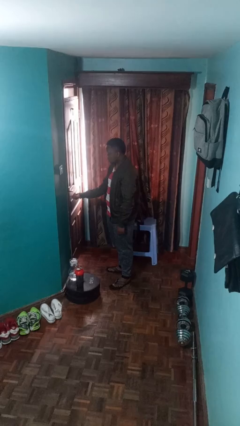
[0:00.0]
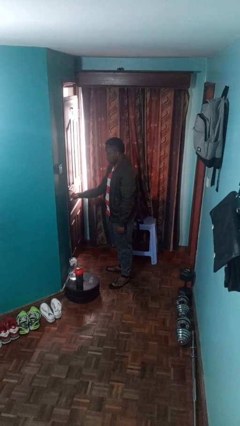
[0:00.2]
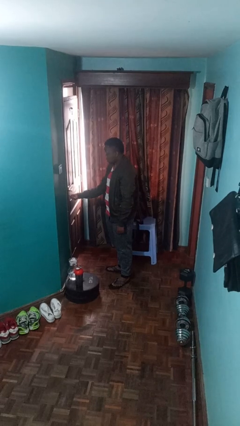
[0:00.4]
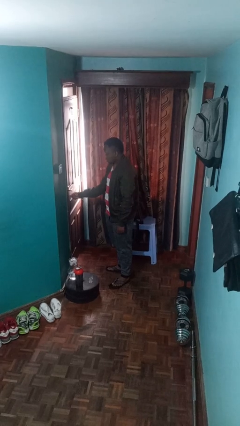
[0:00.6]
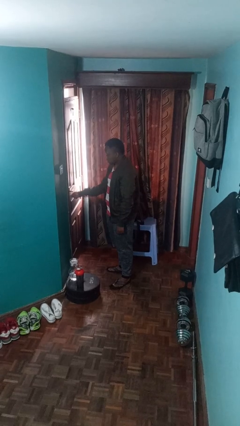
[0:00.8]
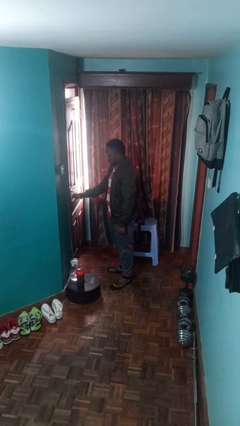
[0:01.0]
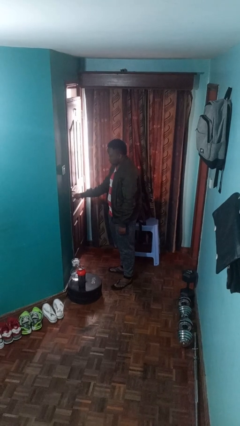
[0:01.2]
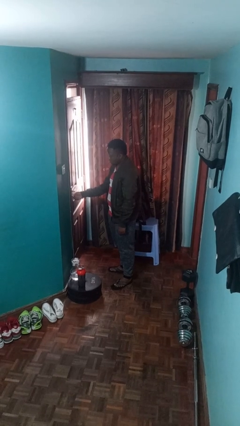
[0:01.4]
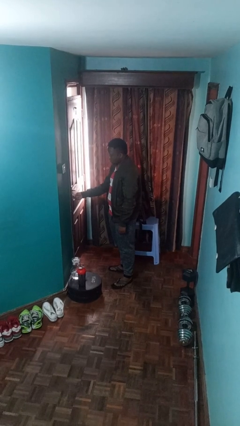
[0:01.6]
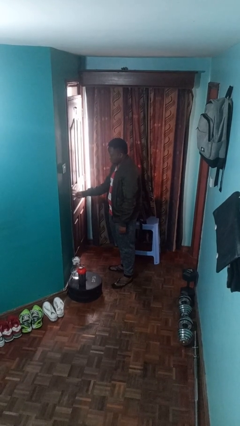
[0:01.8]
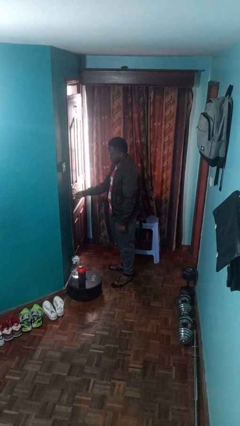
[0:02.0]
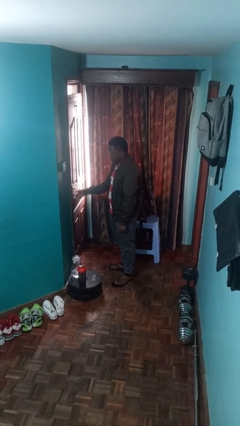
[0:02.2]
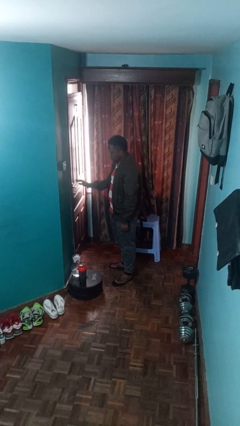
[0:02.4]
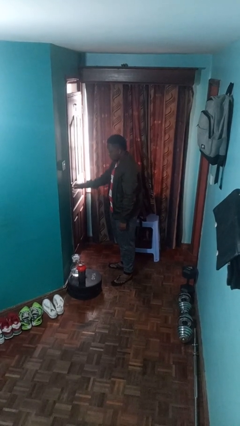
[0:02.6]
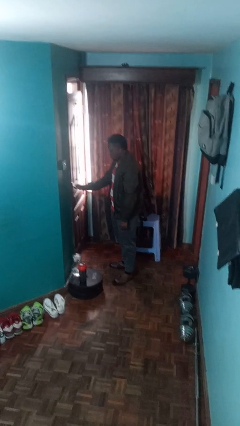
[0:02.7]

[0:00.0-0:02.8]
person unlocks door with keys

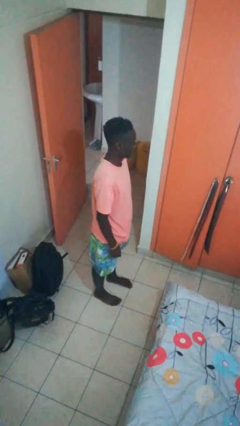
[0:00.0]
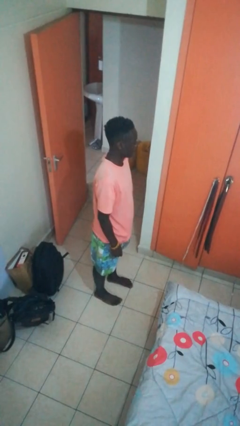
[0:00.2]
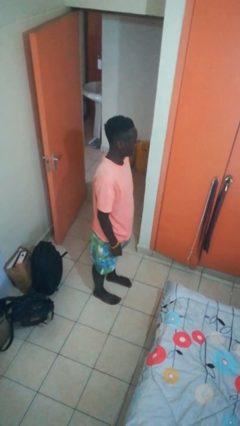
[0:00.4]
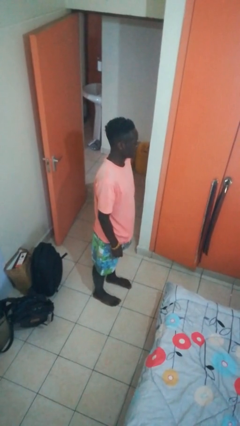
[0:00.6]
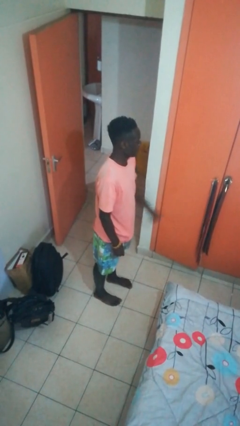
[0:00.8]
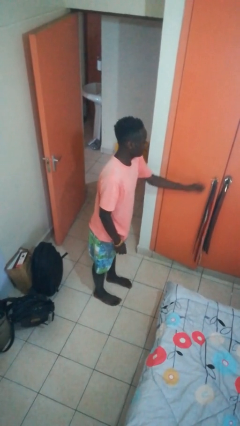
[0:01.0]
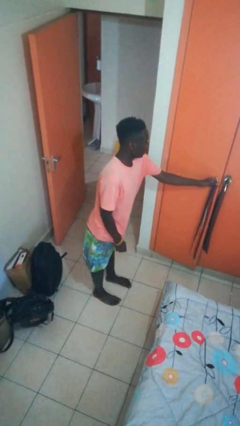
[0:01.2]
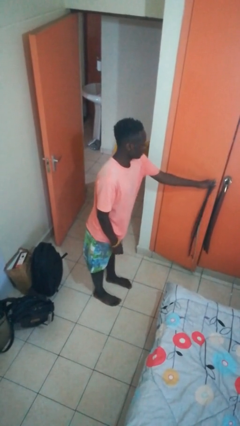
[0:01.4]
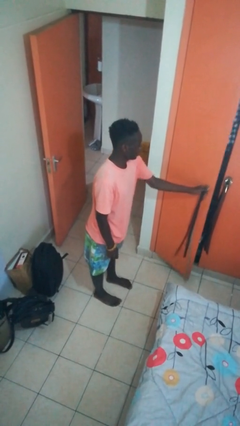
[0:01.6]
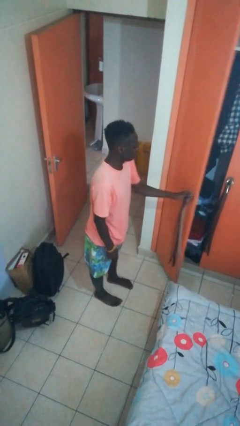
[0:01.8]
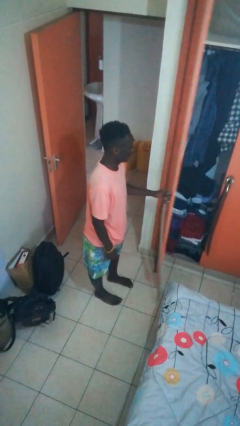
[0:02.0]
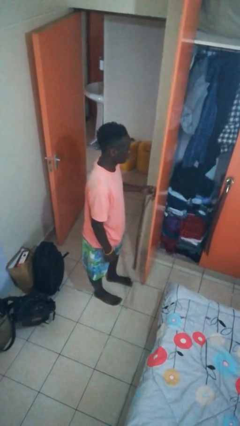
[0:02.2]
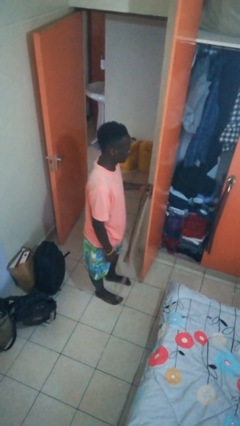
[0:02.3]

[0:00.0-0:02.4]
person opens closet door

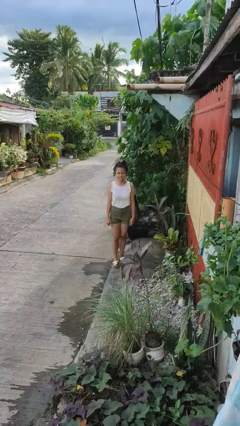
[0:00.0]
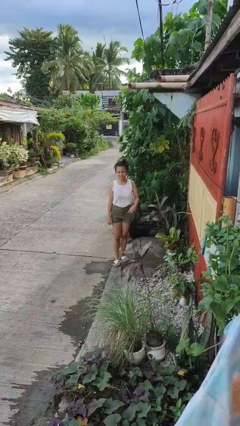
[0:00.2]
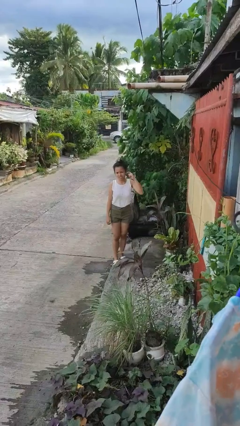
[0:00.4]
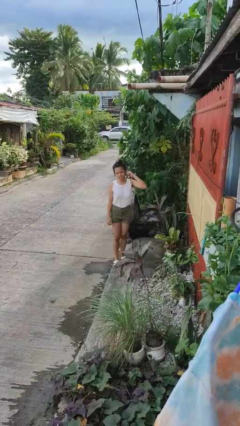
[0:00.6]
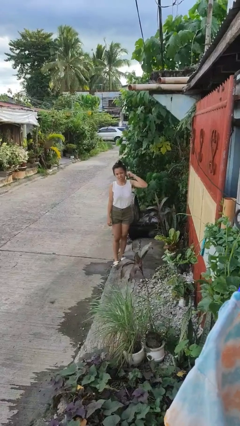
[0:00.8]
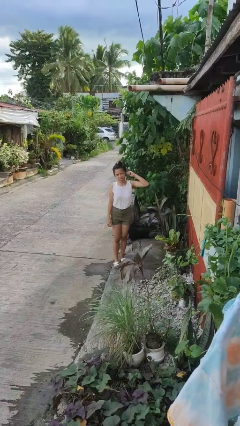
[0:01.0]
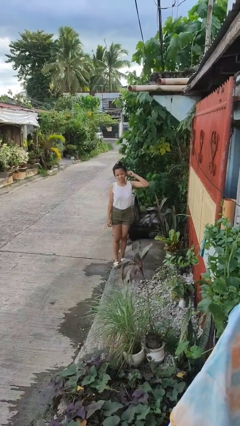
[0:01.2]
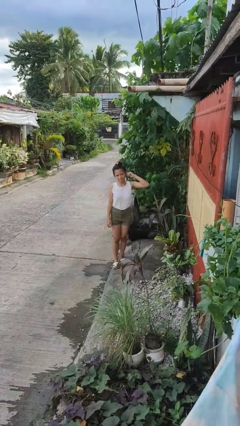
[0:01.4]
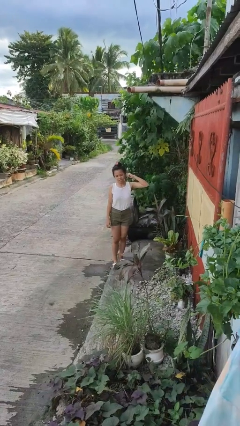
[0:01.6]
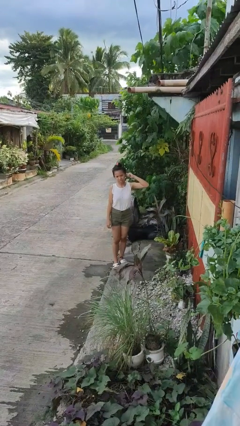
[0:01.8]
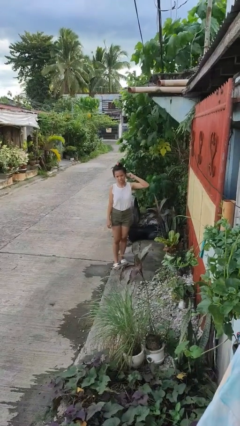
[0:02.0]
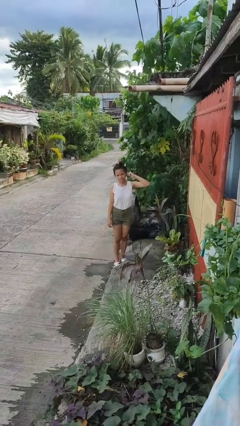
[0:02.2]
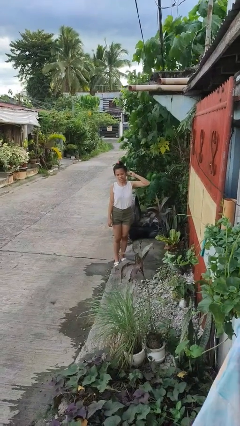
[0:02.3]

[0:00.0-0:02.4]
person touches earlobe

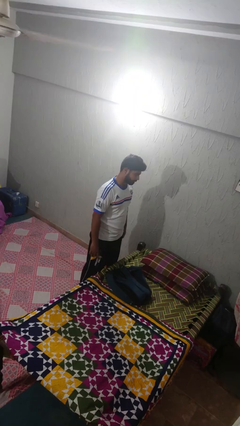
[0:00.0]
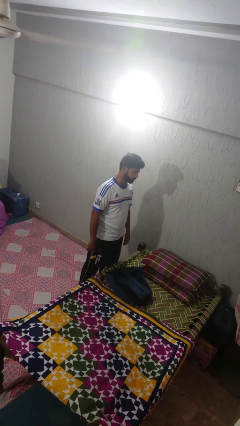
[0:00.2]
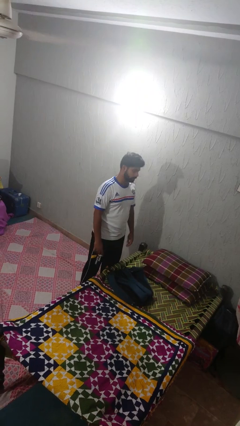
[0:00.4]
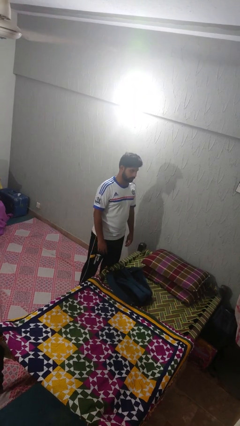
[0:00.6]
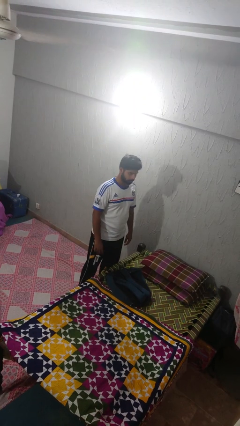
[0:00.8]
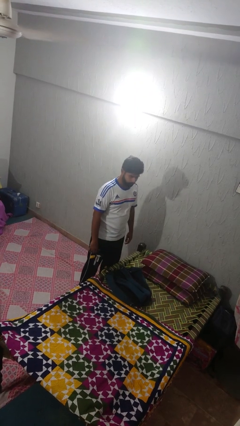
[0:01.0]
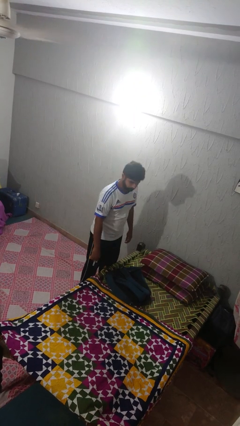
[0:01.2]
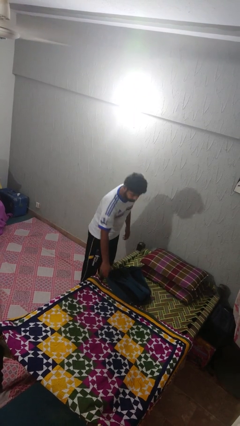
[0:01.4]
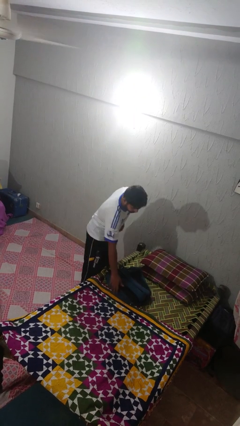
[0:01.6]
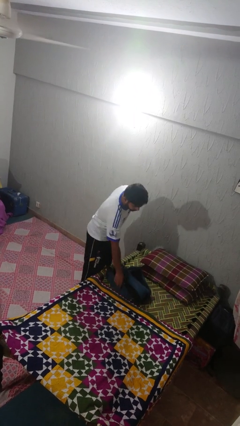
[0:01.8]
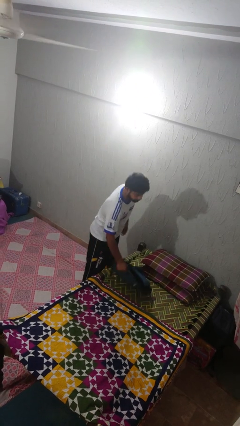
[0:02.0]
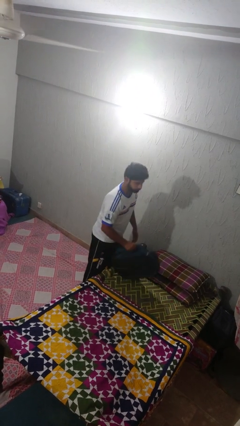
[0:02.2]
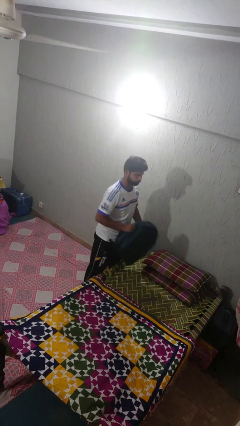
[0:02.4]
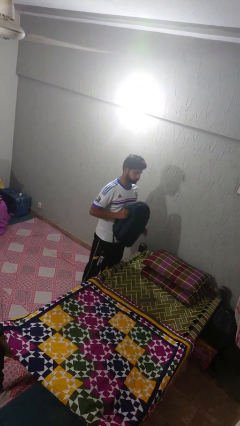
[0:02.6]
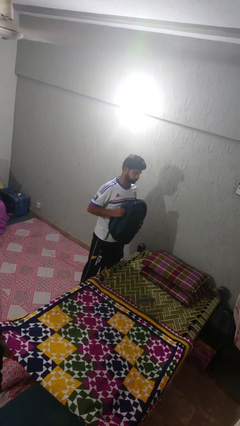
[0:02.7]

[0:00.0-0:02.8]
person picks up object from bed

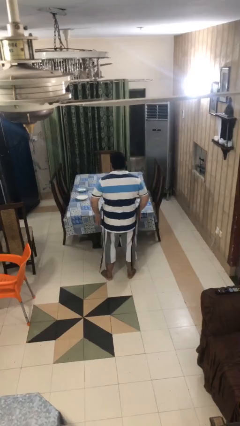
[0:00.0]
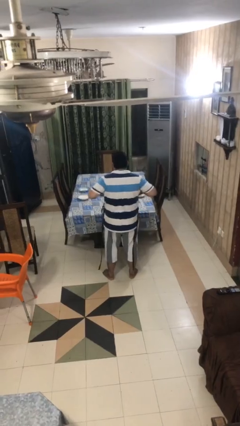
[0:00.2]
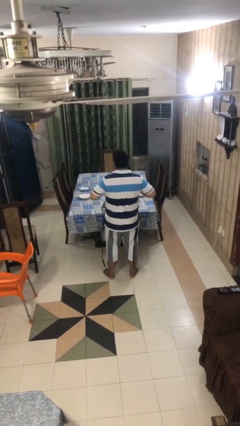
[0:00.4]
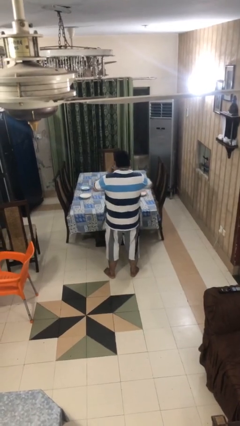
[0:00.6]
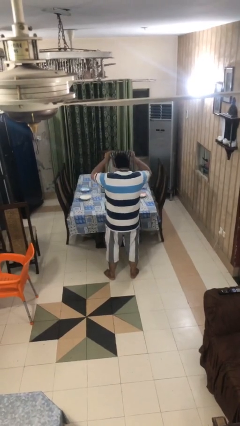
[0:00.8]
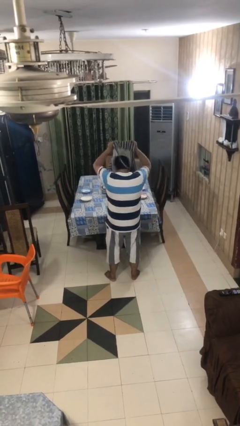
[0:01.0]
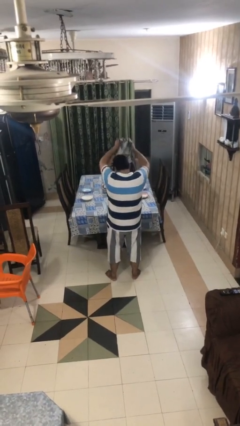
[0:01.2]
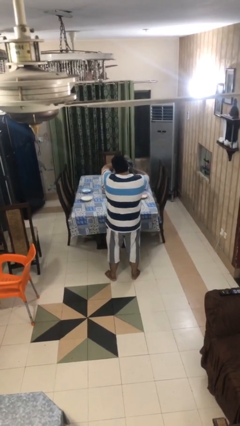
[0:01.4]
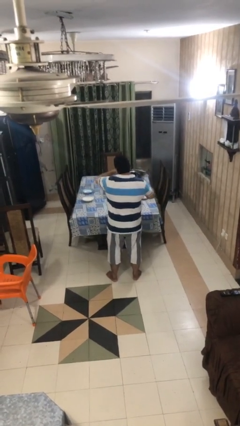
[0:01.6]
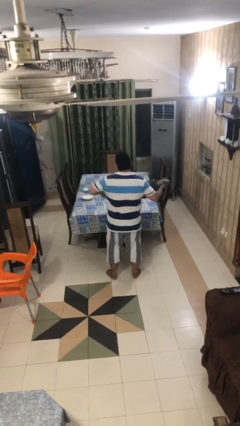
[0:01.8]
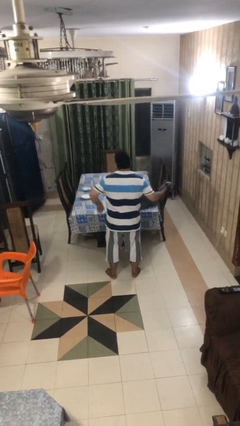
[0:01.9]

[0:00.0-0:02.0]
person takes off apron

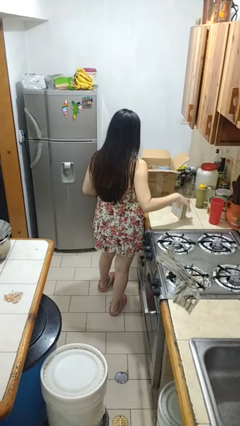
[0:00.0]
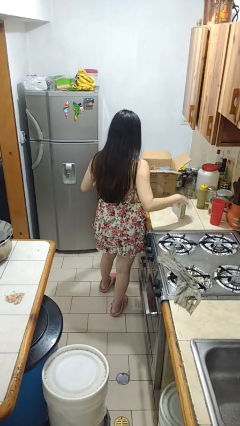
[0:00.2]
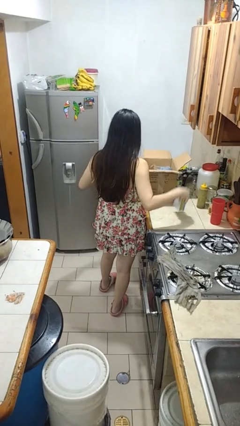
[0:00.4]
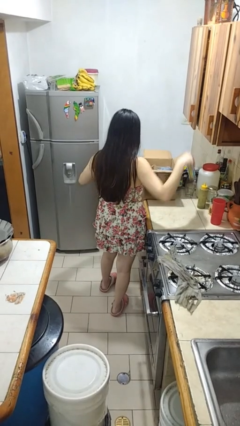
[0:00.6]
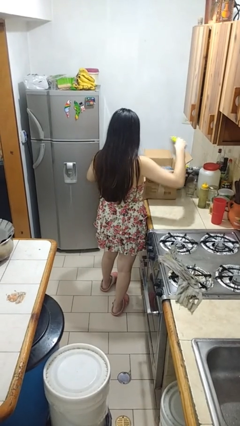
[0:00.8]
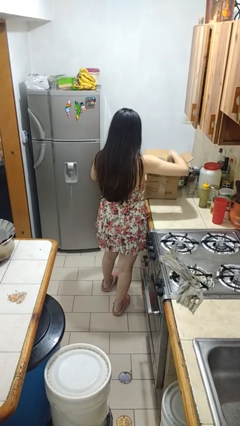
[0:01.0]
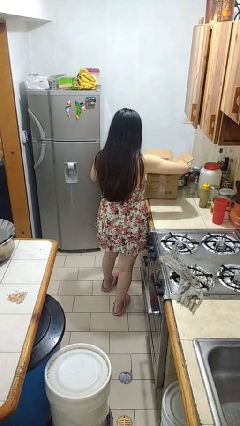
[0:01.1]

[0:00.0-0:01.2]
person puts object into box

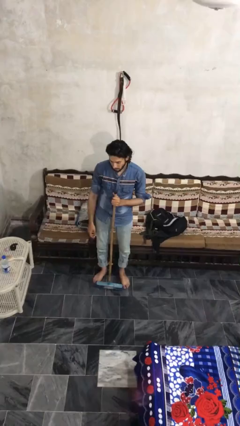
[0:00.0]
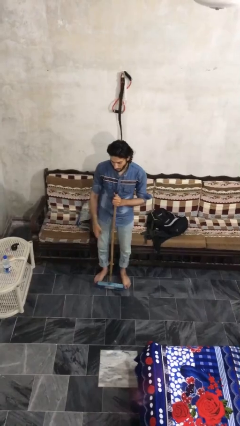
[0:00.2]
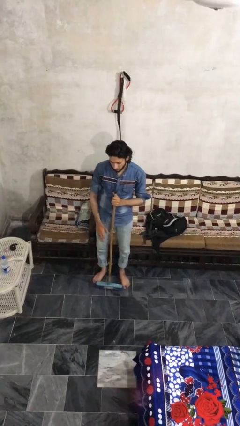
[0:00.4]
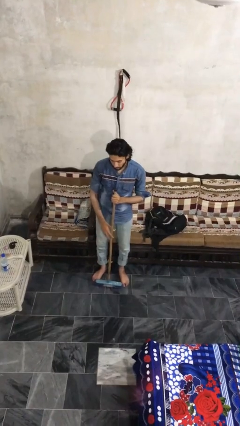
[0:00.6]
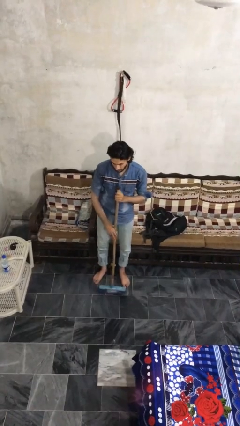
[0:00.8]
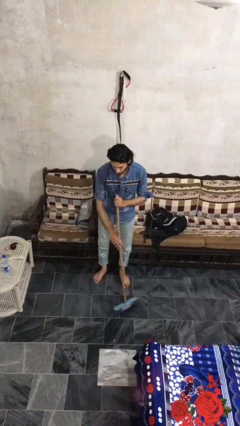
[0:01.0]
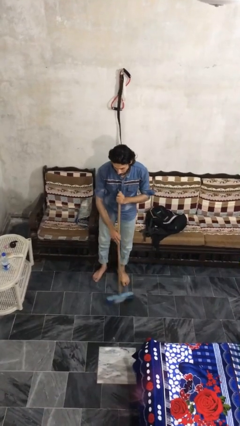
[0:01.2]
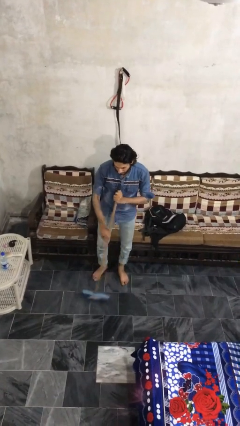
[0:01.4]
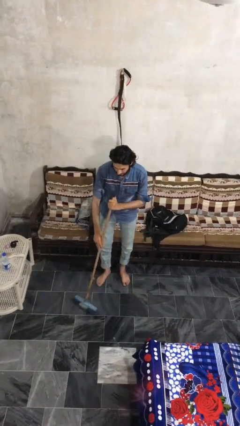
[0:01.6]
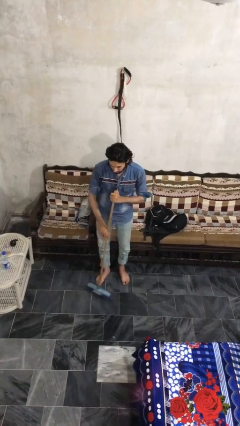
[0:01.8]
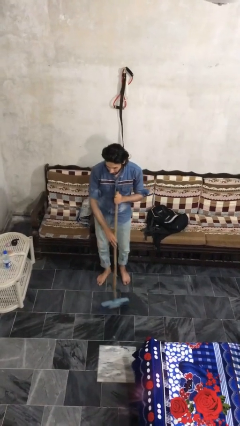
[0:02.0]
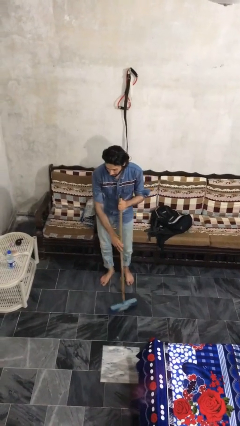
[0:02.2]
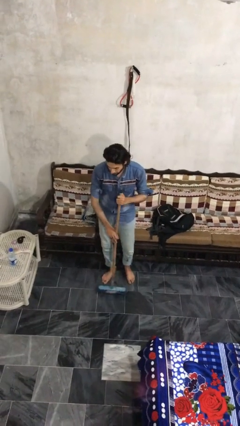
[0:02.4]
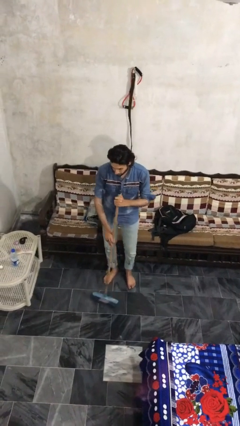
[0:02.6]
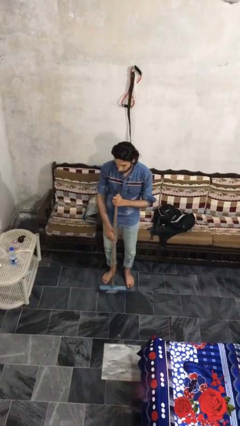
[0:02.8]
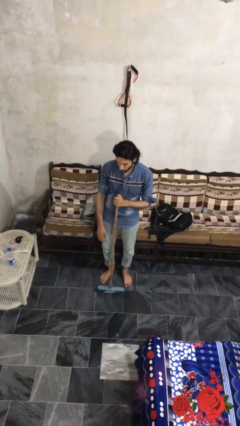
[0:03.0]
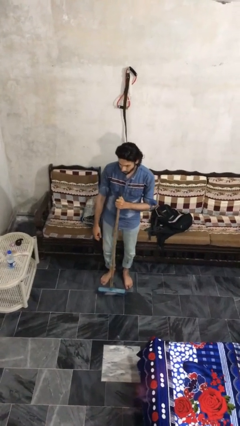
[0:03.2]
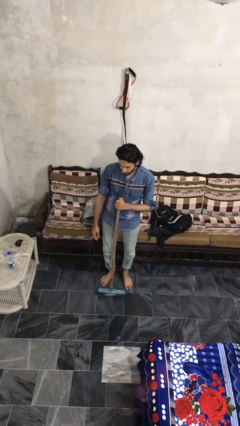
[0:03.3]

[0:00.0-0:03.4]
person sweeps floor
